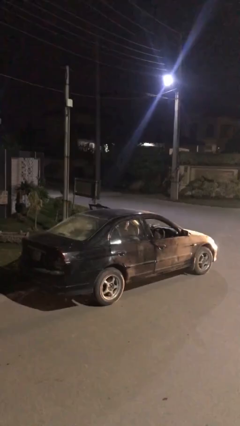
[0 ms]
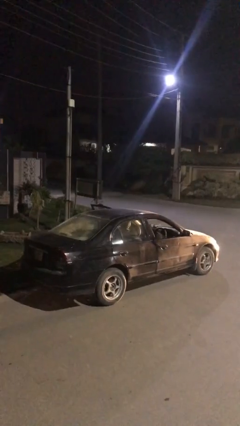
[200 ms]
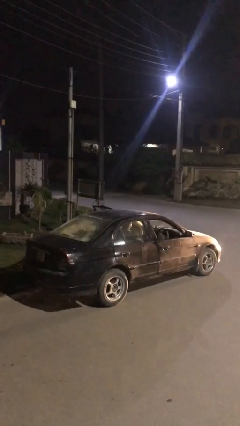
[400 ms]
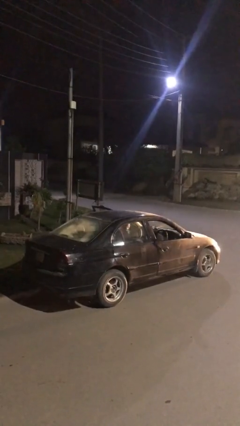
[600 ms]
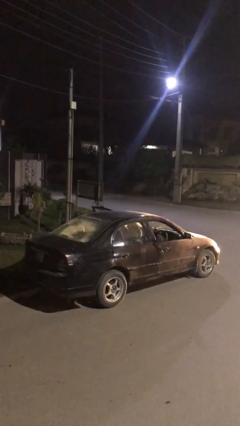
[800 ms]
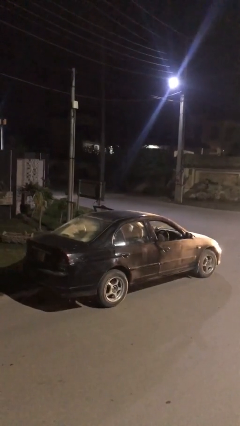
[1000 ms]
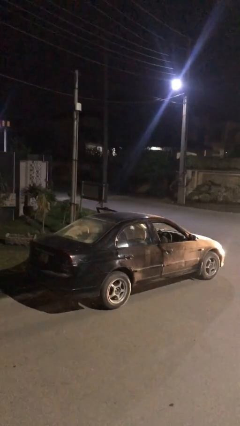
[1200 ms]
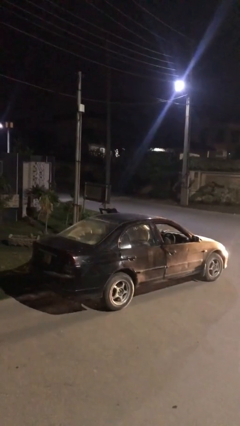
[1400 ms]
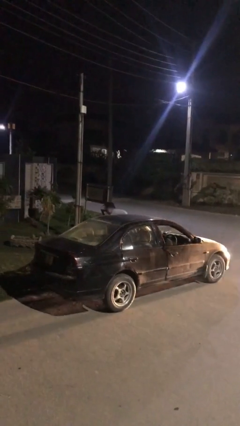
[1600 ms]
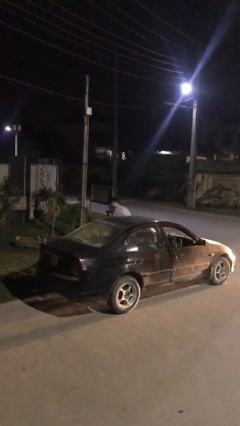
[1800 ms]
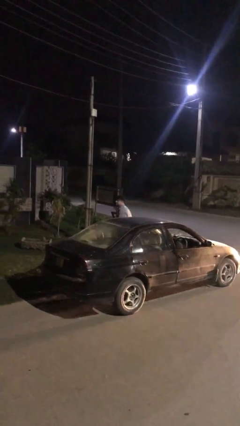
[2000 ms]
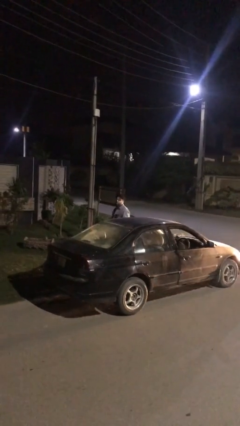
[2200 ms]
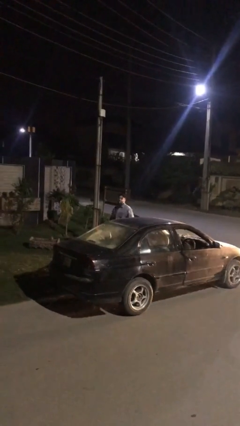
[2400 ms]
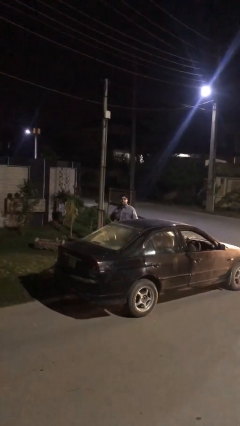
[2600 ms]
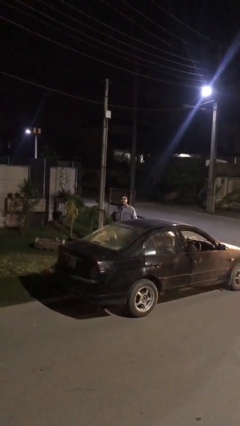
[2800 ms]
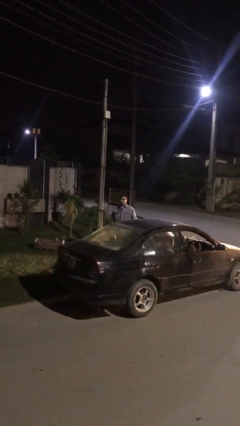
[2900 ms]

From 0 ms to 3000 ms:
person exits car

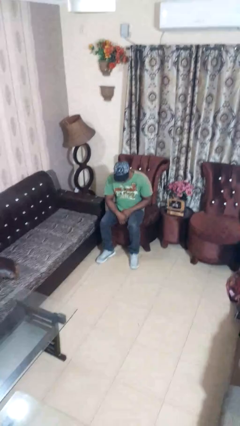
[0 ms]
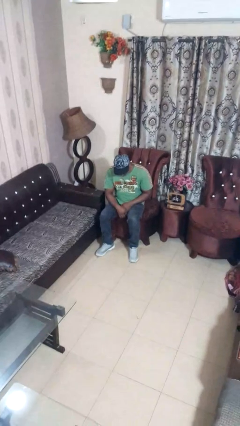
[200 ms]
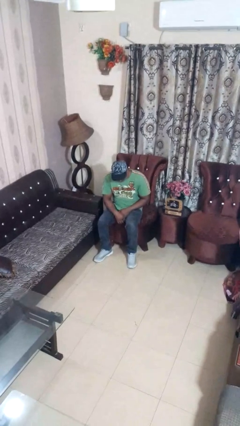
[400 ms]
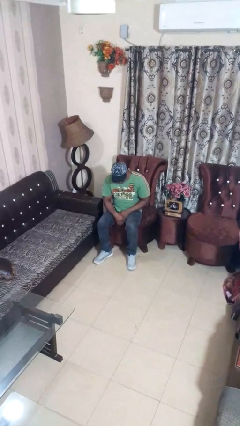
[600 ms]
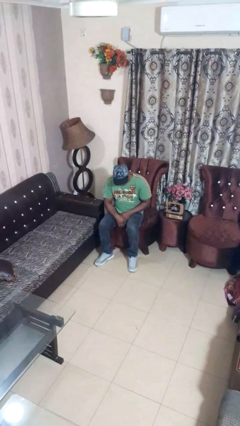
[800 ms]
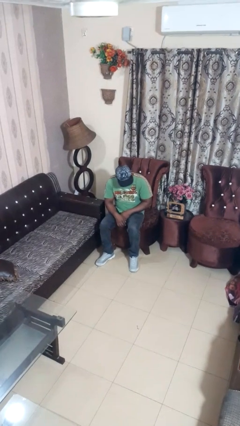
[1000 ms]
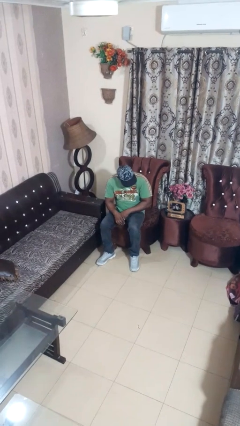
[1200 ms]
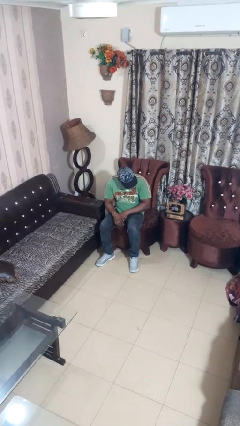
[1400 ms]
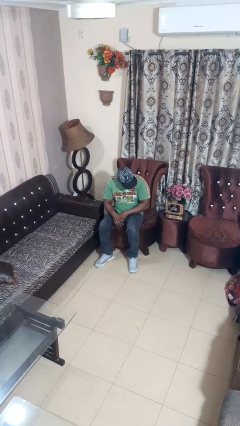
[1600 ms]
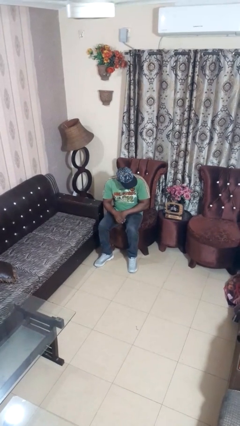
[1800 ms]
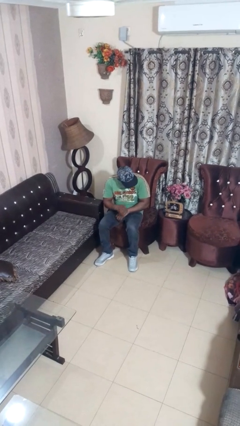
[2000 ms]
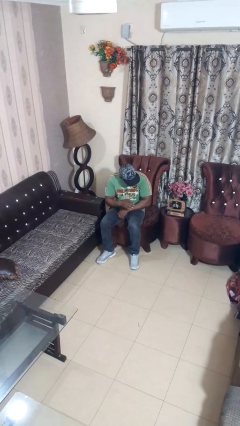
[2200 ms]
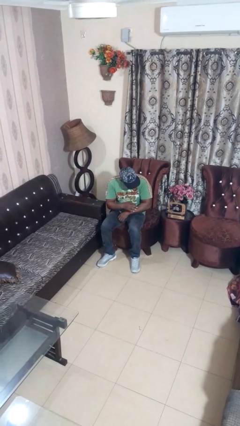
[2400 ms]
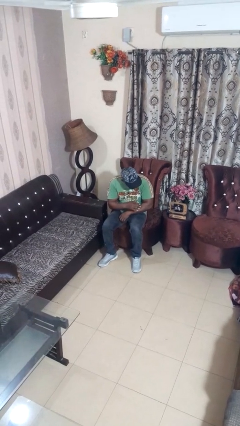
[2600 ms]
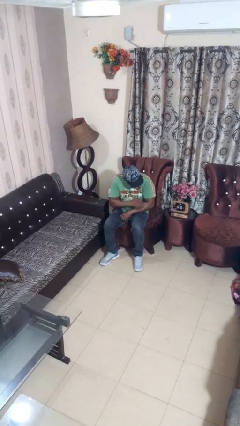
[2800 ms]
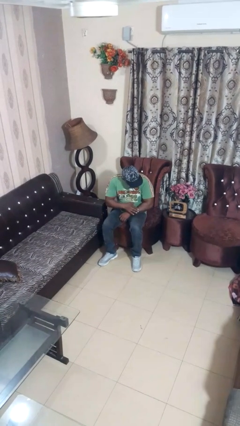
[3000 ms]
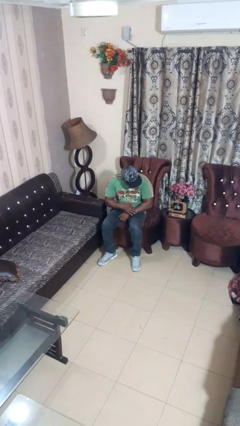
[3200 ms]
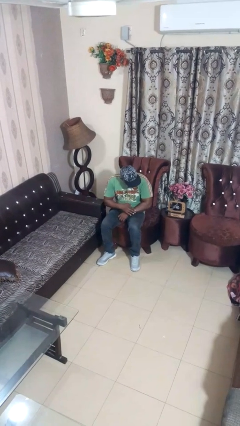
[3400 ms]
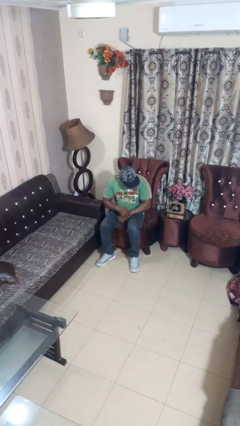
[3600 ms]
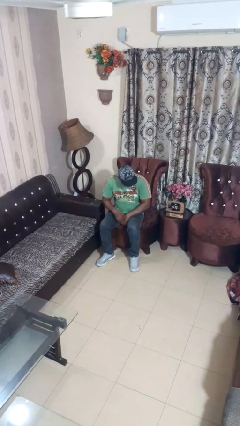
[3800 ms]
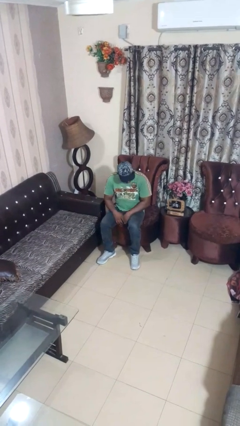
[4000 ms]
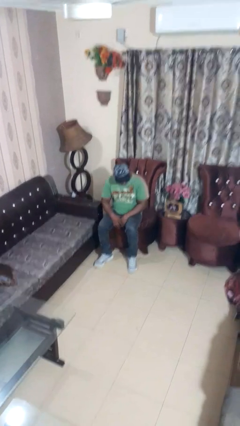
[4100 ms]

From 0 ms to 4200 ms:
person swats bug

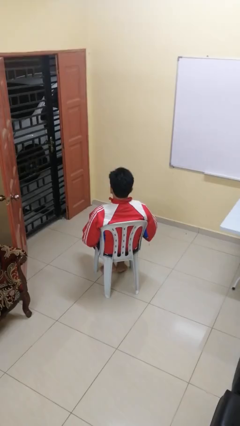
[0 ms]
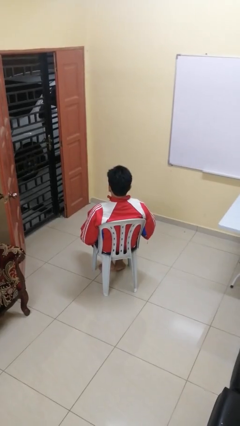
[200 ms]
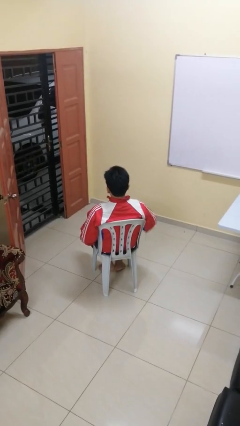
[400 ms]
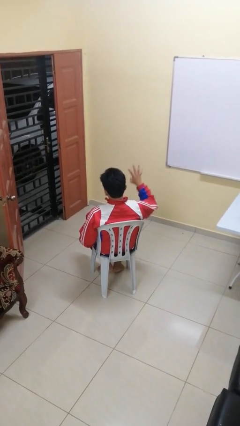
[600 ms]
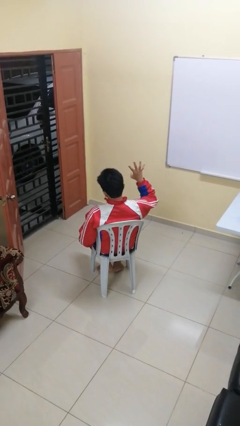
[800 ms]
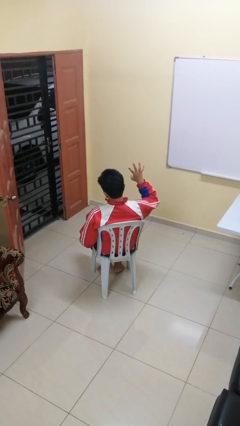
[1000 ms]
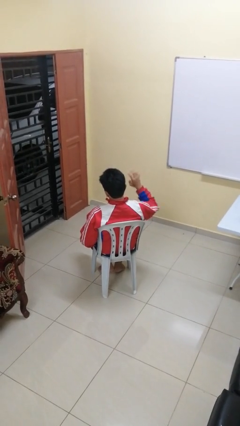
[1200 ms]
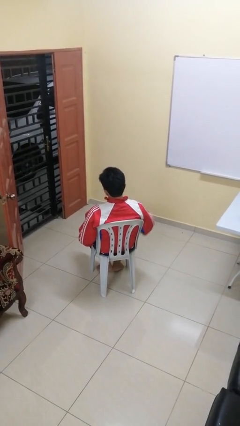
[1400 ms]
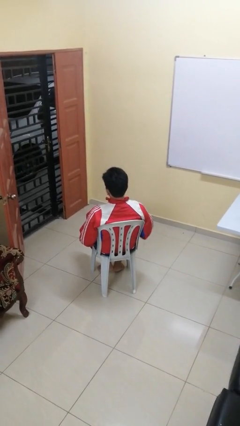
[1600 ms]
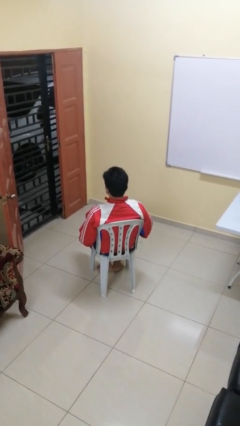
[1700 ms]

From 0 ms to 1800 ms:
person gestures number four

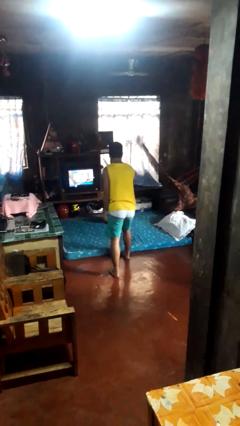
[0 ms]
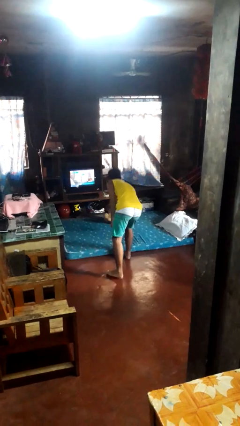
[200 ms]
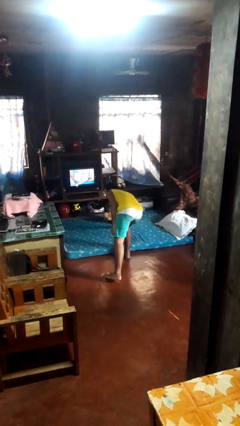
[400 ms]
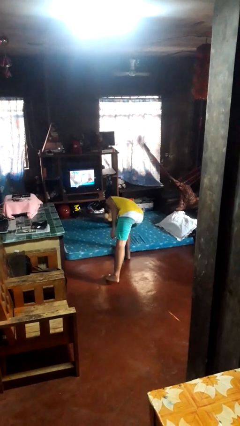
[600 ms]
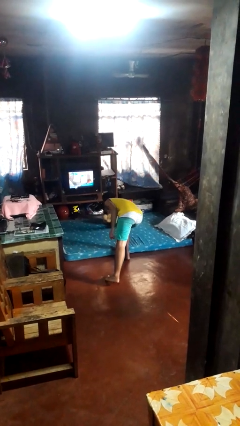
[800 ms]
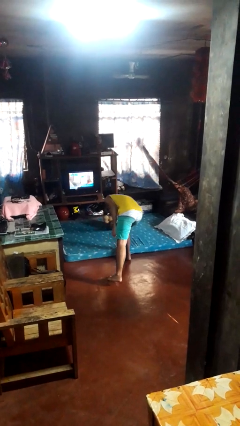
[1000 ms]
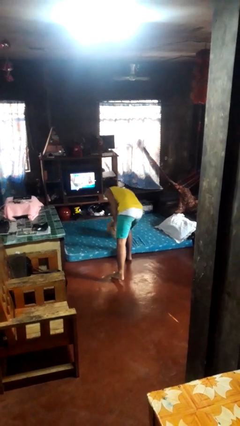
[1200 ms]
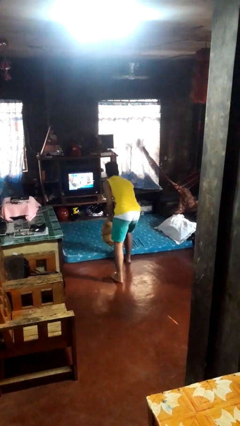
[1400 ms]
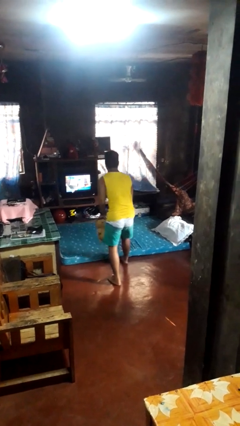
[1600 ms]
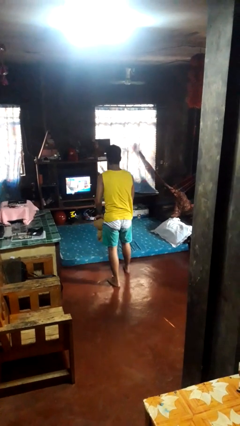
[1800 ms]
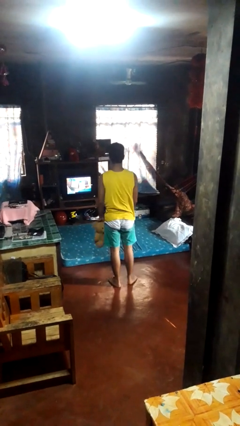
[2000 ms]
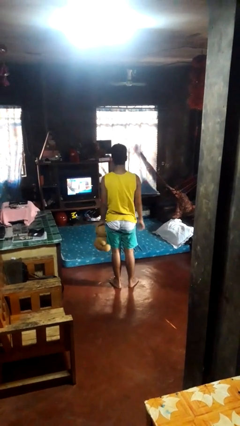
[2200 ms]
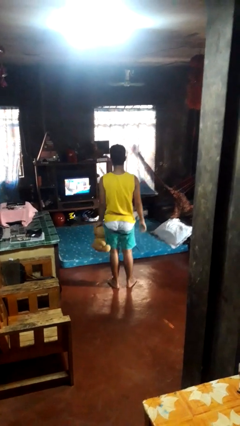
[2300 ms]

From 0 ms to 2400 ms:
person picks up object from bed

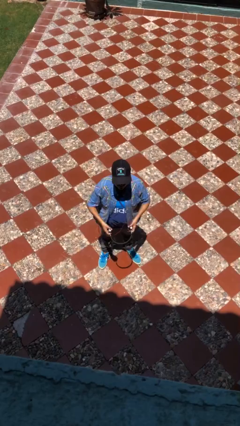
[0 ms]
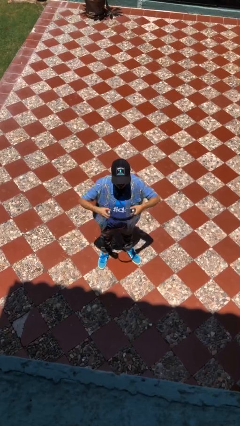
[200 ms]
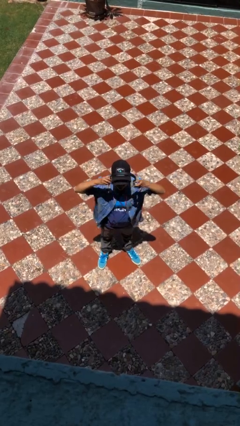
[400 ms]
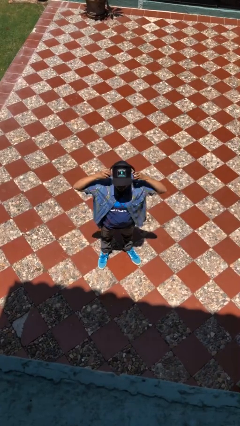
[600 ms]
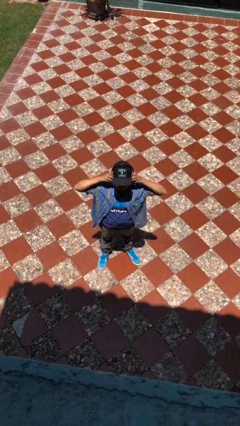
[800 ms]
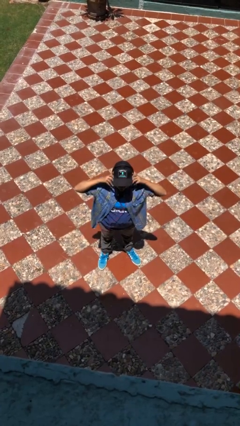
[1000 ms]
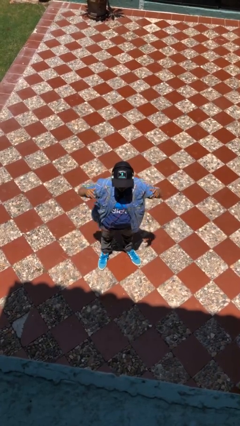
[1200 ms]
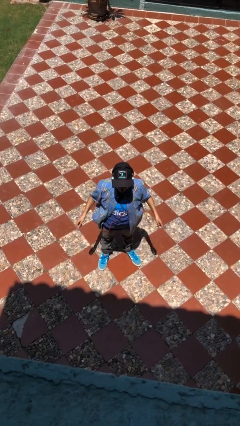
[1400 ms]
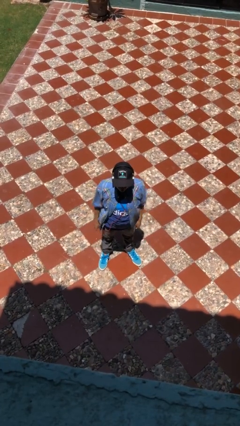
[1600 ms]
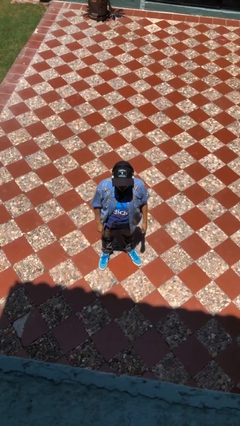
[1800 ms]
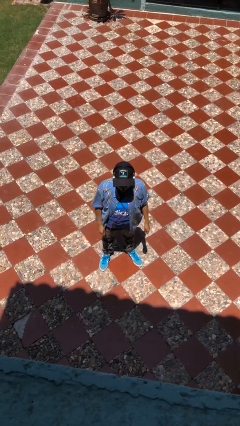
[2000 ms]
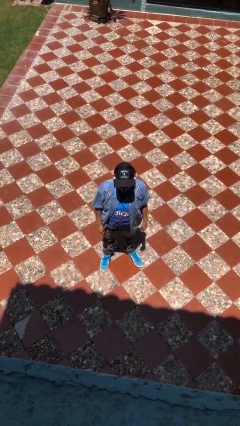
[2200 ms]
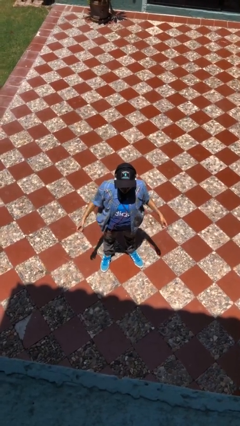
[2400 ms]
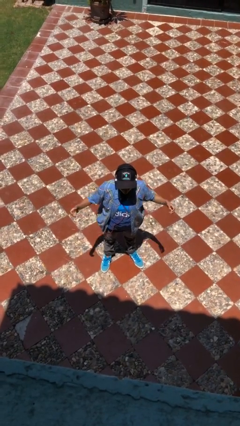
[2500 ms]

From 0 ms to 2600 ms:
person puts on headphones

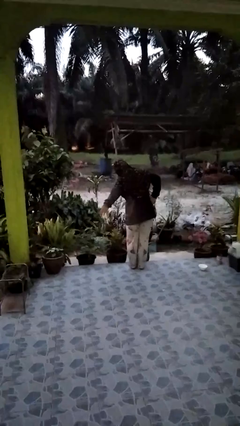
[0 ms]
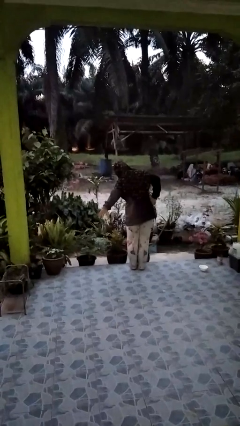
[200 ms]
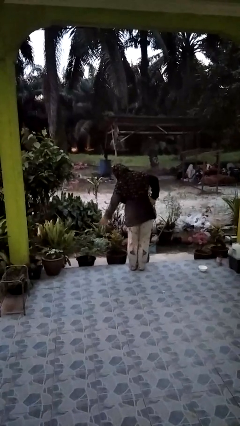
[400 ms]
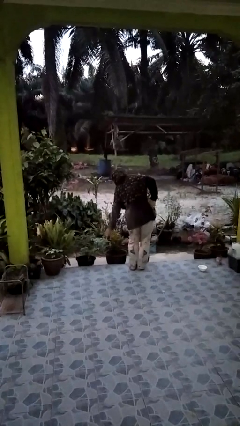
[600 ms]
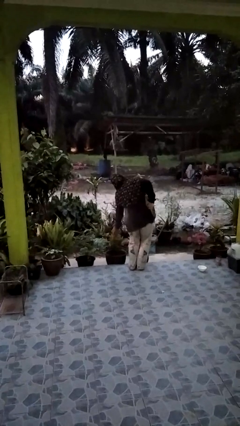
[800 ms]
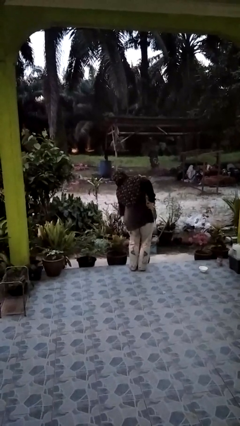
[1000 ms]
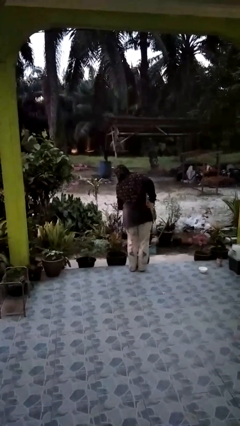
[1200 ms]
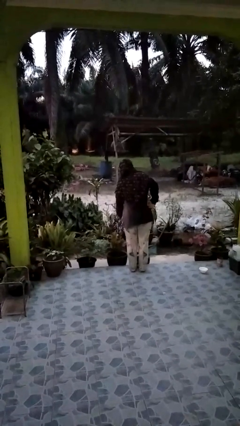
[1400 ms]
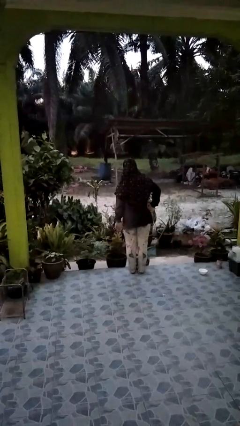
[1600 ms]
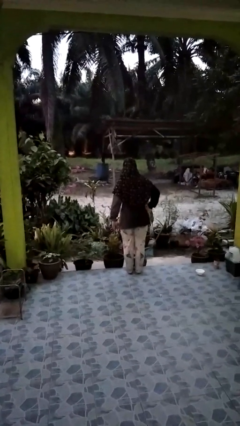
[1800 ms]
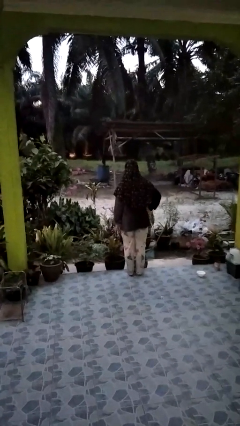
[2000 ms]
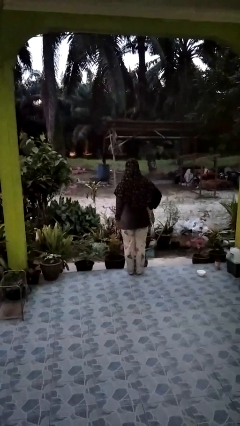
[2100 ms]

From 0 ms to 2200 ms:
person waves hand over object

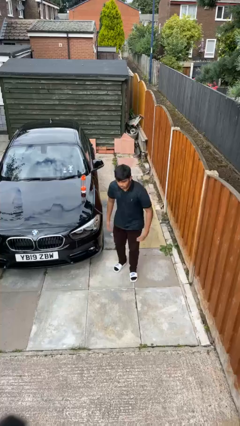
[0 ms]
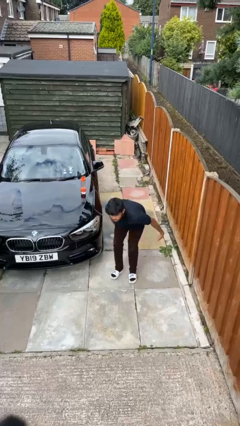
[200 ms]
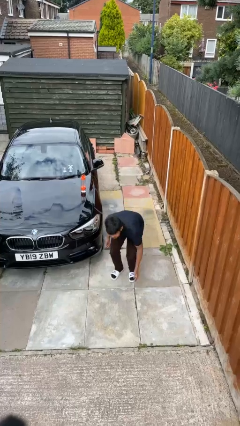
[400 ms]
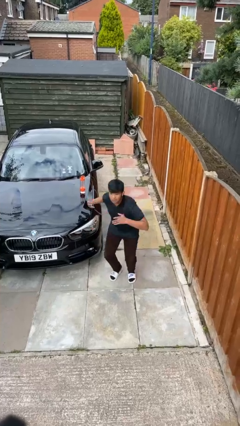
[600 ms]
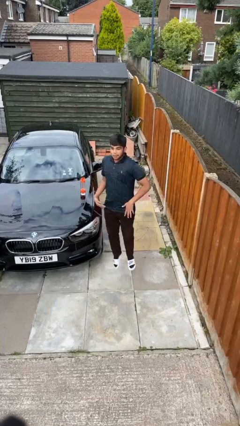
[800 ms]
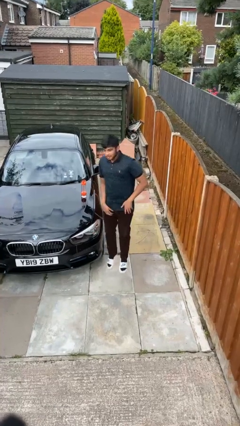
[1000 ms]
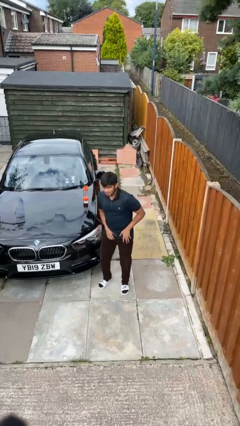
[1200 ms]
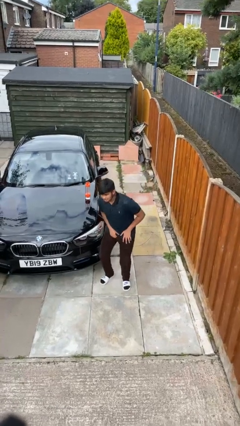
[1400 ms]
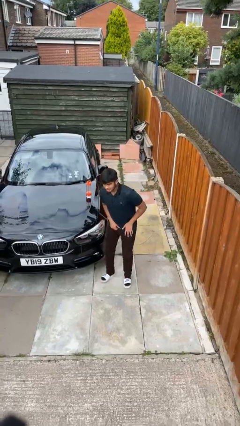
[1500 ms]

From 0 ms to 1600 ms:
person jumps
